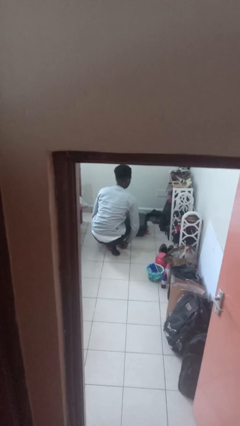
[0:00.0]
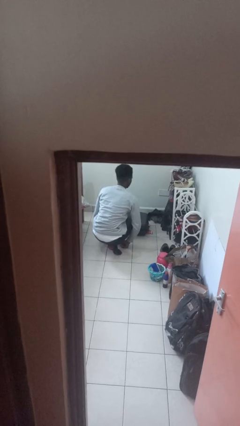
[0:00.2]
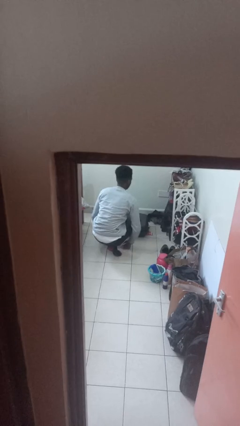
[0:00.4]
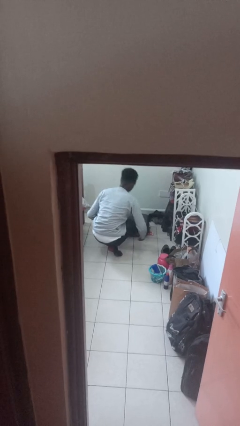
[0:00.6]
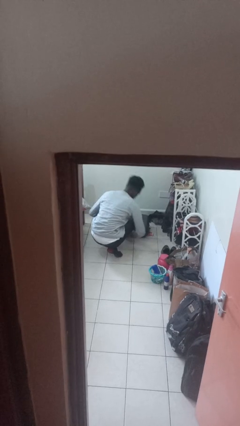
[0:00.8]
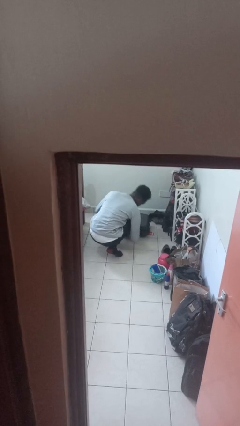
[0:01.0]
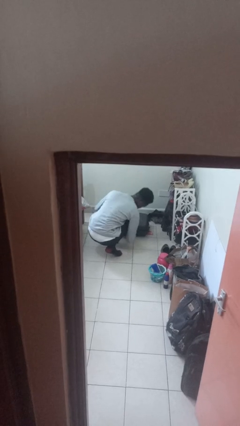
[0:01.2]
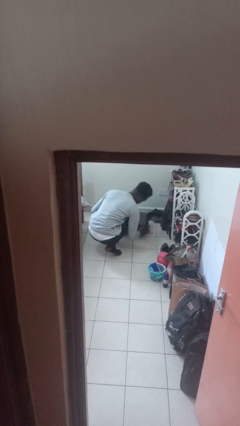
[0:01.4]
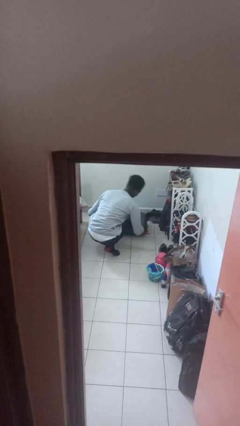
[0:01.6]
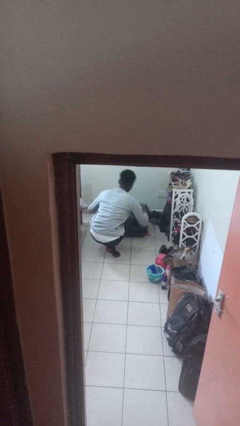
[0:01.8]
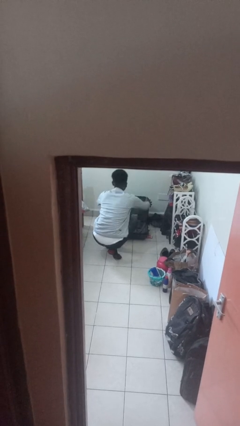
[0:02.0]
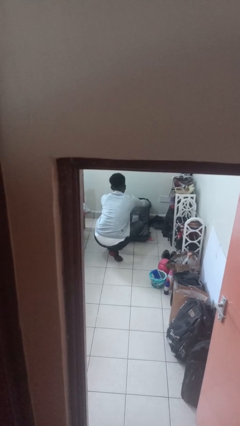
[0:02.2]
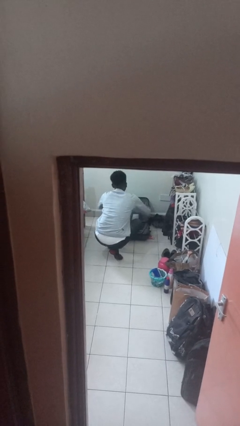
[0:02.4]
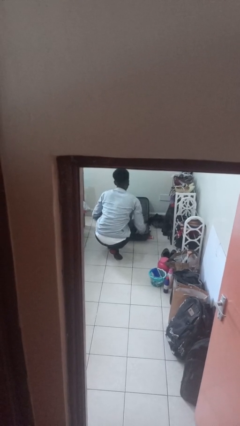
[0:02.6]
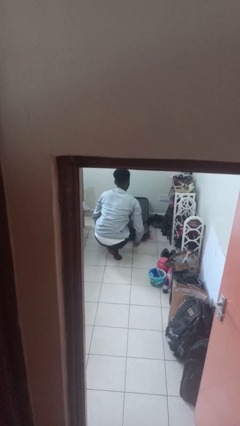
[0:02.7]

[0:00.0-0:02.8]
person opens suitcase

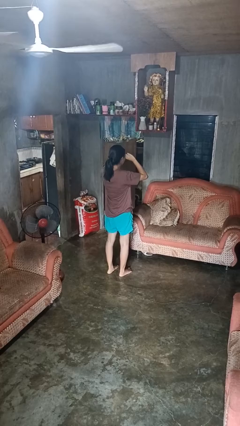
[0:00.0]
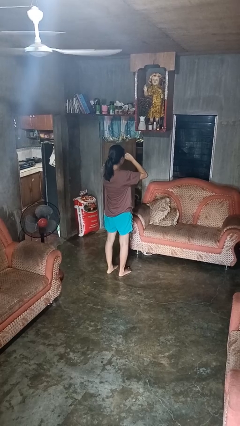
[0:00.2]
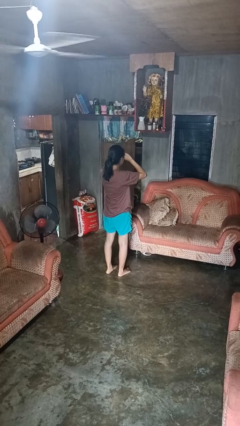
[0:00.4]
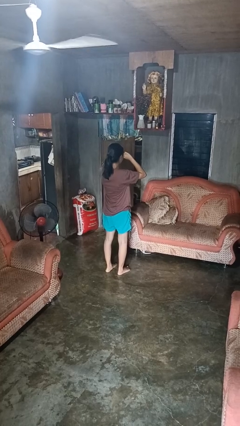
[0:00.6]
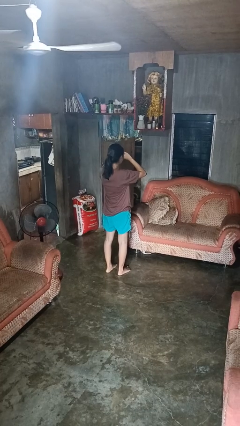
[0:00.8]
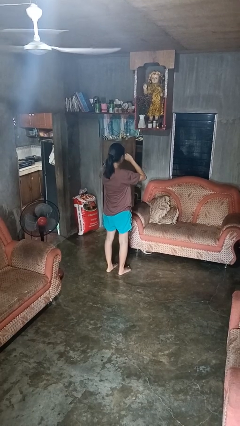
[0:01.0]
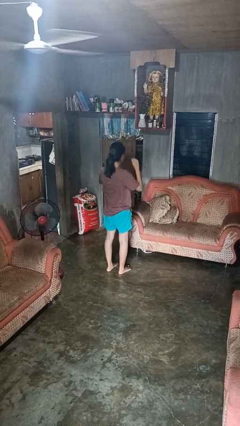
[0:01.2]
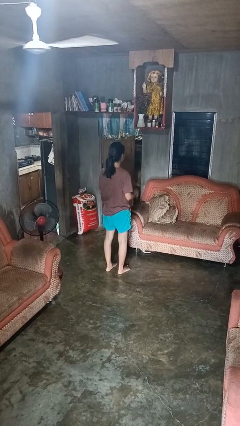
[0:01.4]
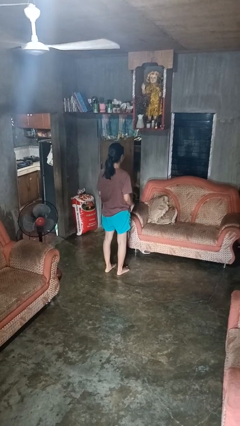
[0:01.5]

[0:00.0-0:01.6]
person rubs eyes

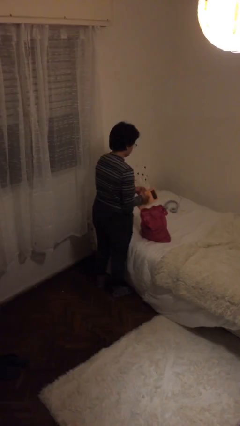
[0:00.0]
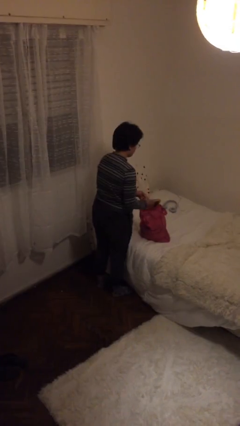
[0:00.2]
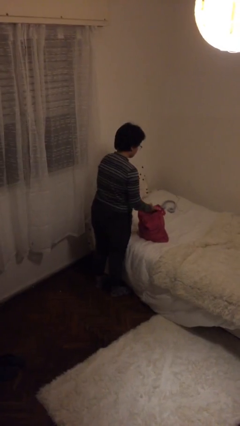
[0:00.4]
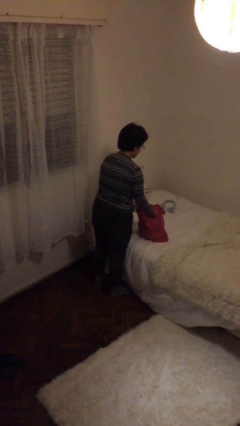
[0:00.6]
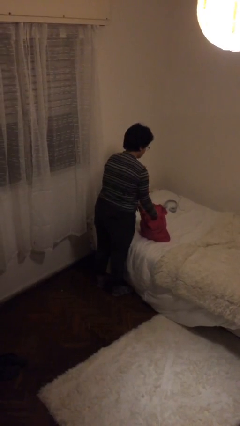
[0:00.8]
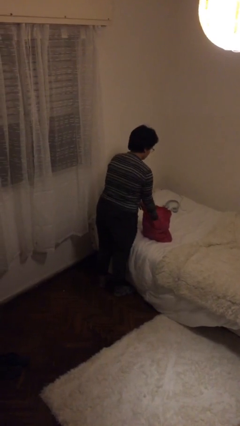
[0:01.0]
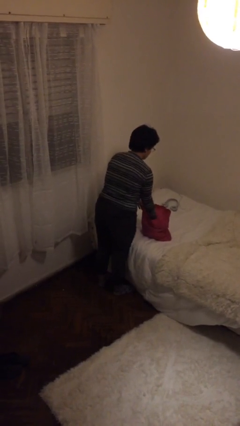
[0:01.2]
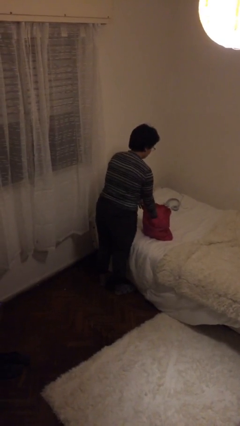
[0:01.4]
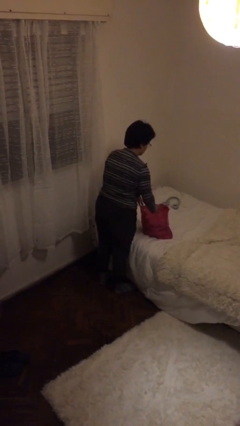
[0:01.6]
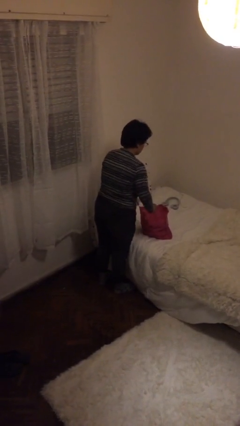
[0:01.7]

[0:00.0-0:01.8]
person puts object into bag

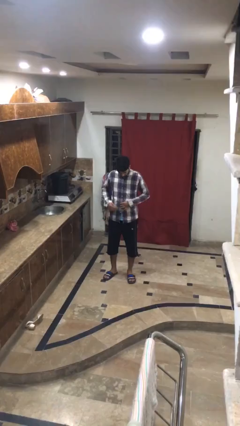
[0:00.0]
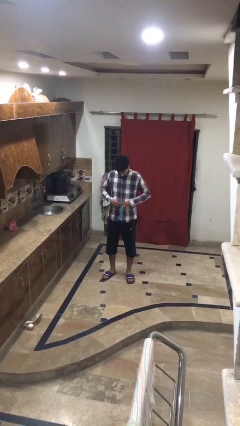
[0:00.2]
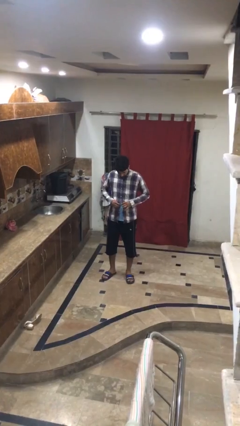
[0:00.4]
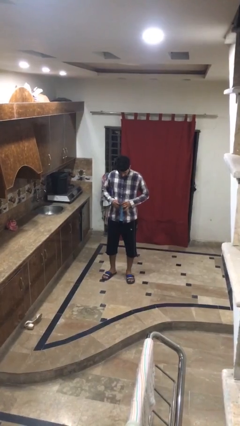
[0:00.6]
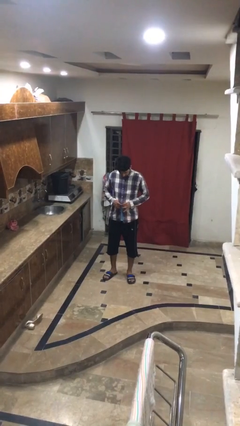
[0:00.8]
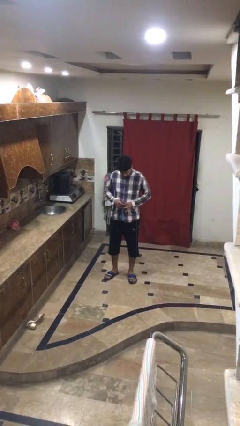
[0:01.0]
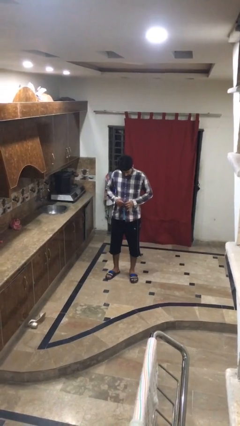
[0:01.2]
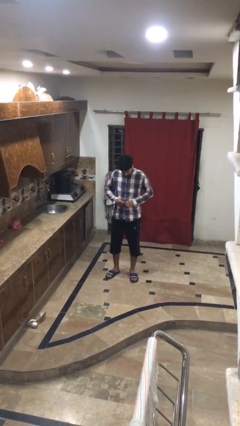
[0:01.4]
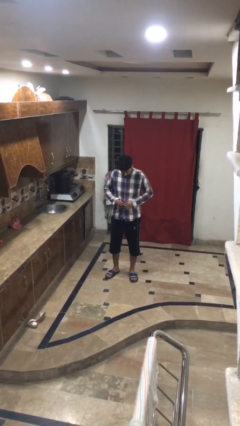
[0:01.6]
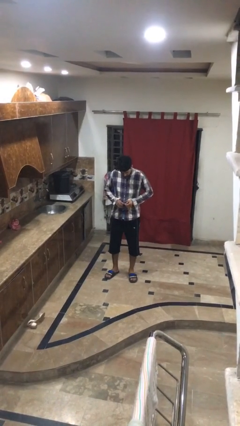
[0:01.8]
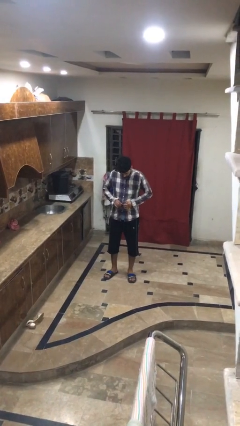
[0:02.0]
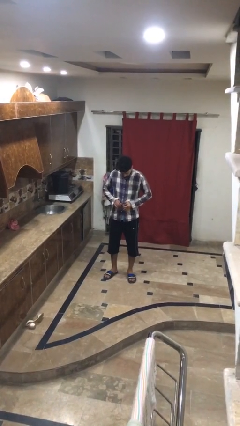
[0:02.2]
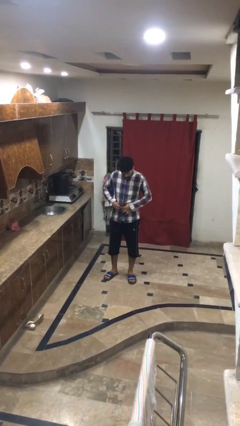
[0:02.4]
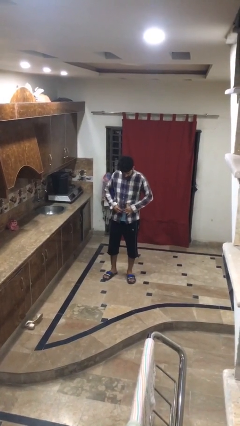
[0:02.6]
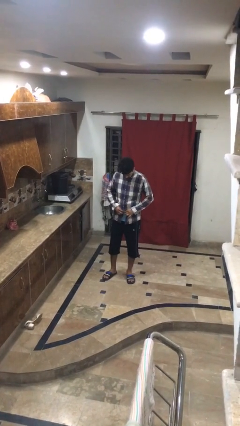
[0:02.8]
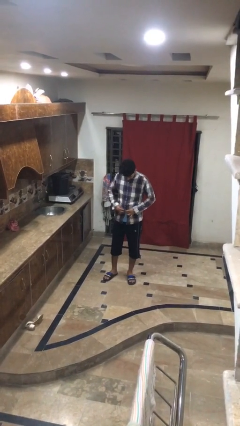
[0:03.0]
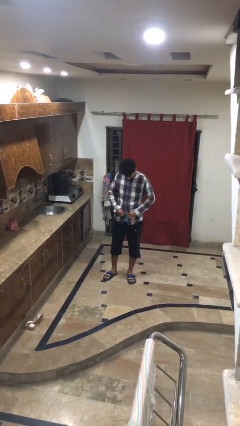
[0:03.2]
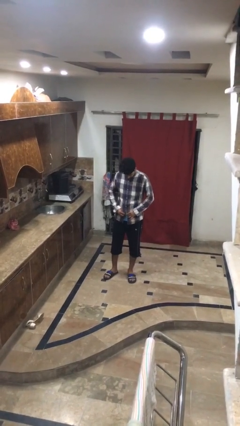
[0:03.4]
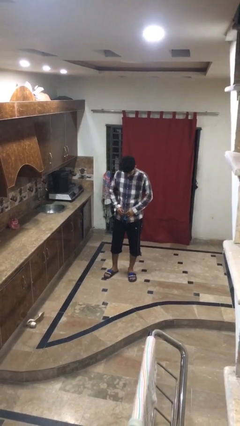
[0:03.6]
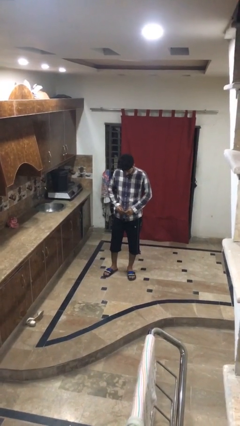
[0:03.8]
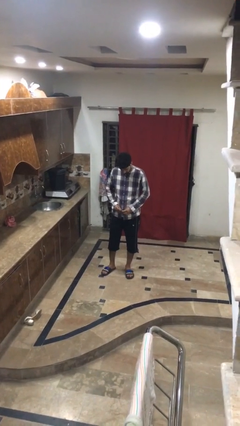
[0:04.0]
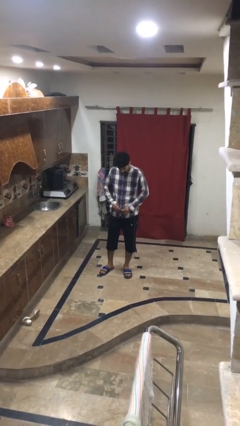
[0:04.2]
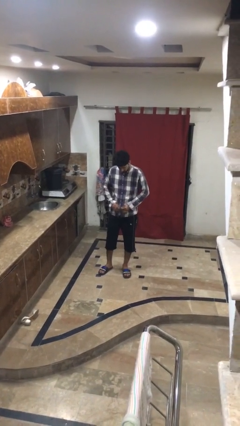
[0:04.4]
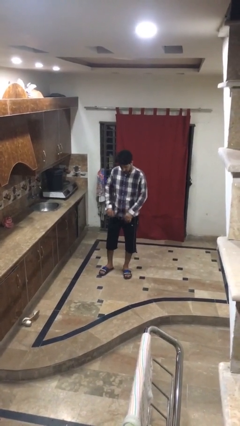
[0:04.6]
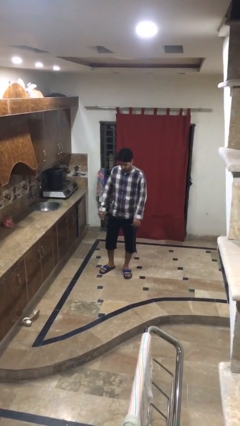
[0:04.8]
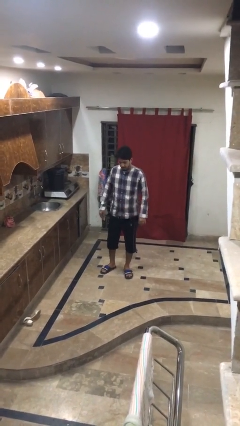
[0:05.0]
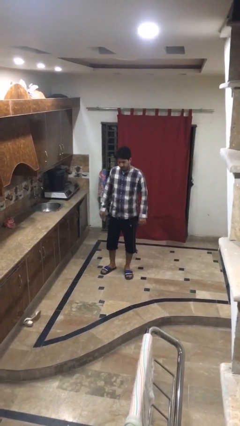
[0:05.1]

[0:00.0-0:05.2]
person buttons shirt

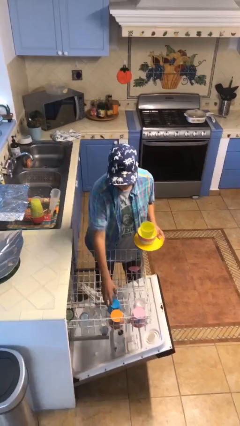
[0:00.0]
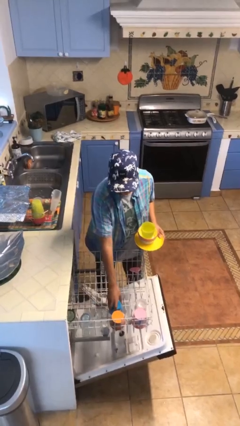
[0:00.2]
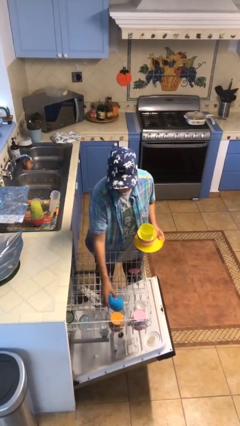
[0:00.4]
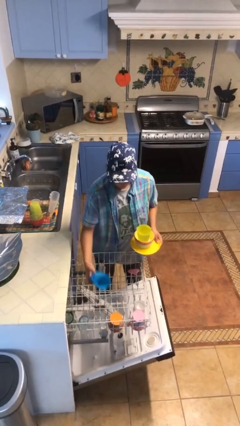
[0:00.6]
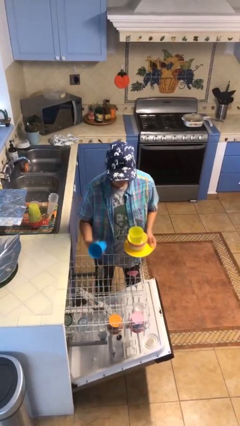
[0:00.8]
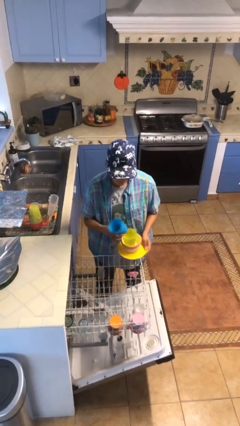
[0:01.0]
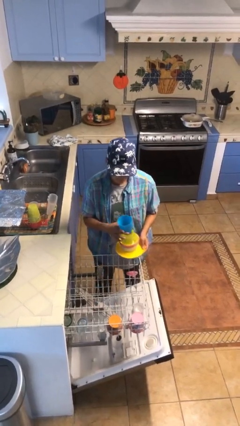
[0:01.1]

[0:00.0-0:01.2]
person unloads dishwasher

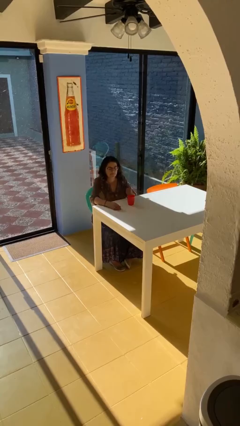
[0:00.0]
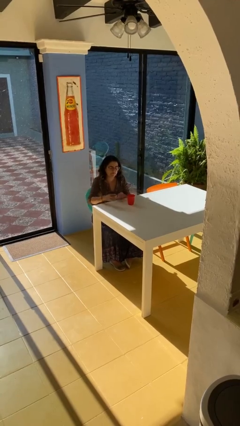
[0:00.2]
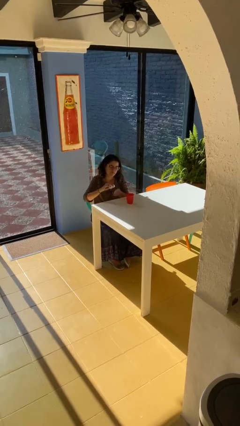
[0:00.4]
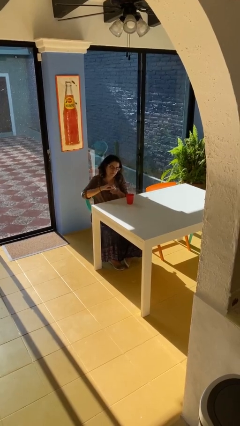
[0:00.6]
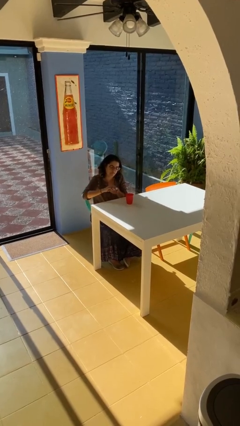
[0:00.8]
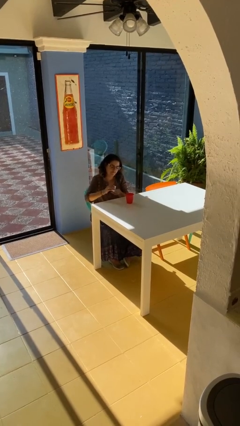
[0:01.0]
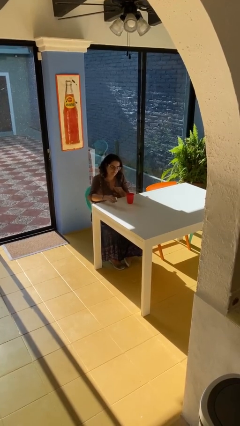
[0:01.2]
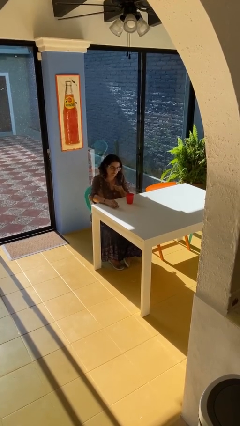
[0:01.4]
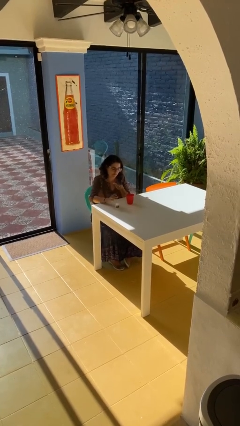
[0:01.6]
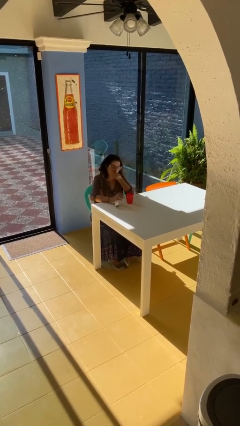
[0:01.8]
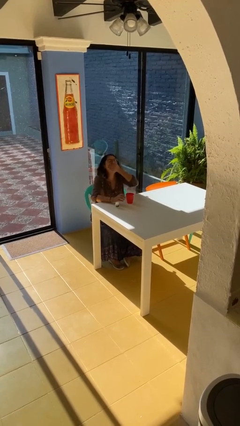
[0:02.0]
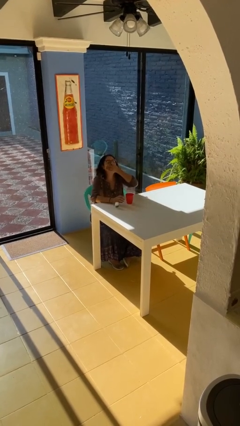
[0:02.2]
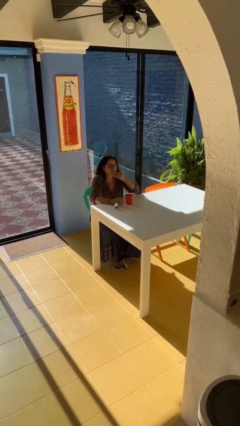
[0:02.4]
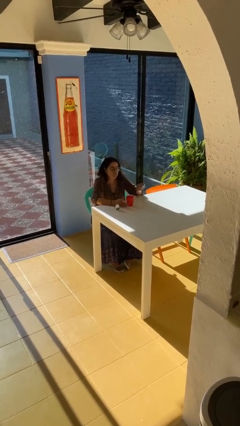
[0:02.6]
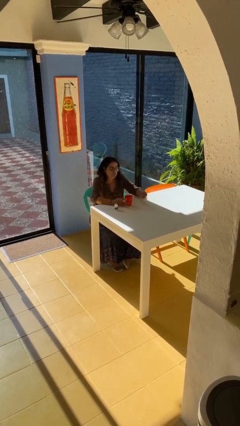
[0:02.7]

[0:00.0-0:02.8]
person takes medicine pills

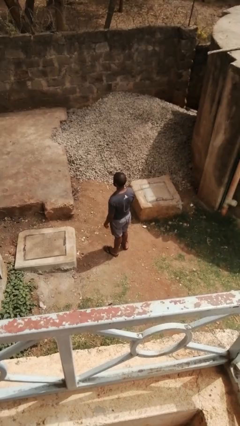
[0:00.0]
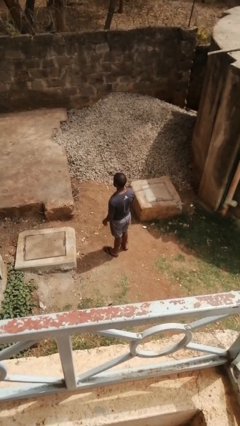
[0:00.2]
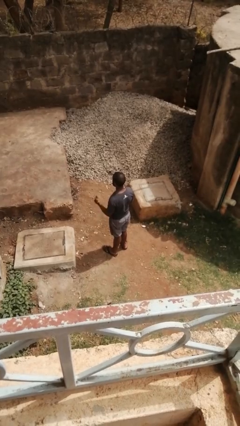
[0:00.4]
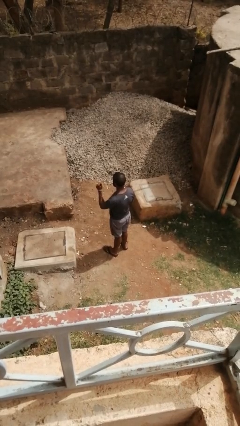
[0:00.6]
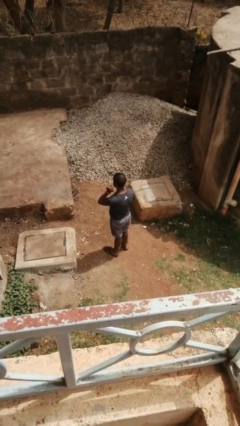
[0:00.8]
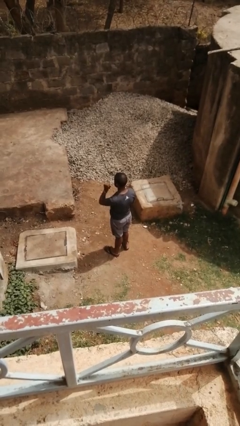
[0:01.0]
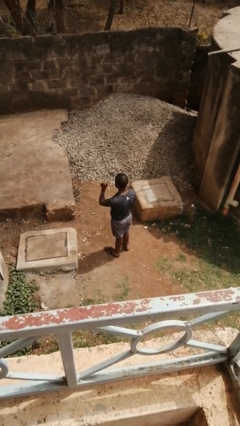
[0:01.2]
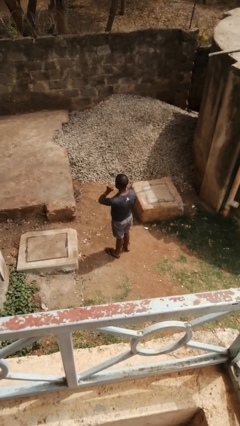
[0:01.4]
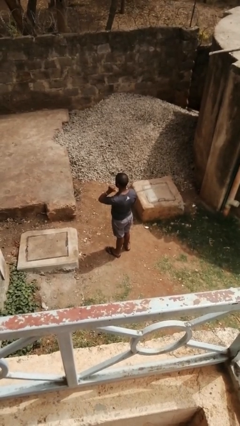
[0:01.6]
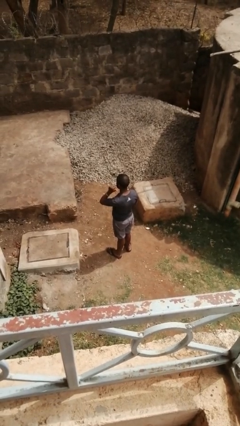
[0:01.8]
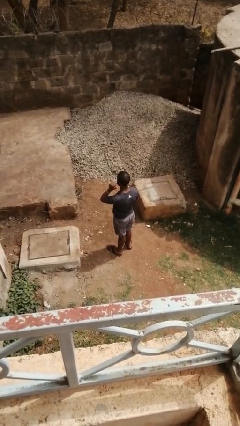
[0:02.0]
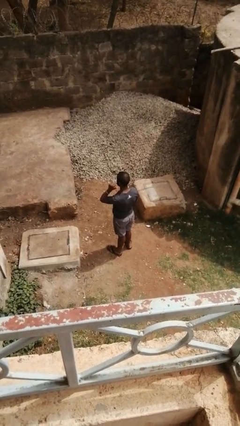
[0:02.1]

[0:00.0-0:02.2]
person gestures behind me
